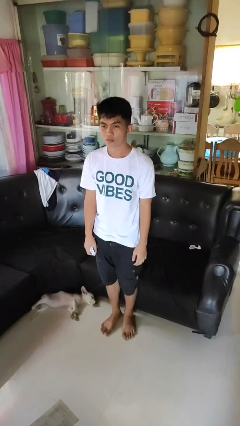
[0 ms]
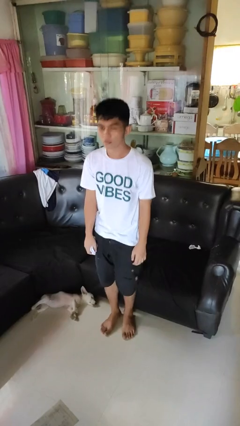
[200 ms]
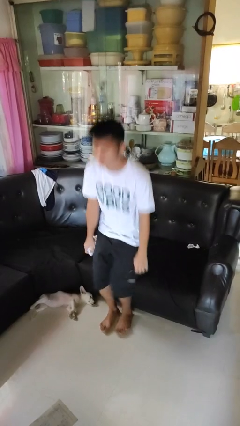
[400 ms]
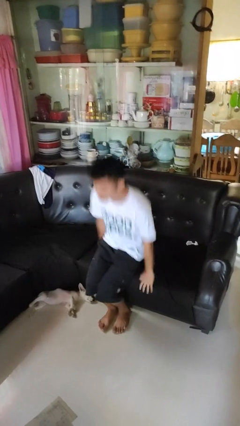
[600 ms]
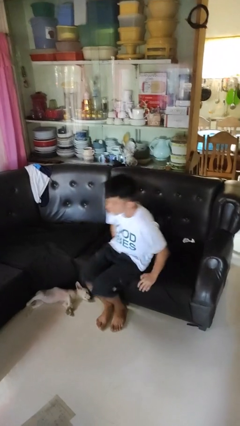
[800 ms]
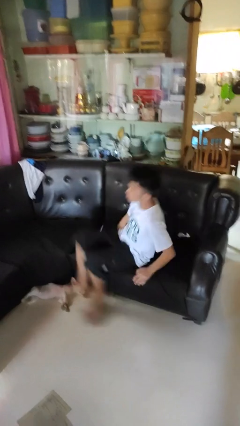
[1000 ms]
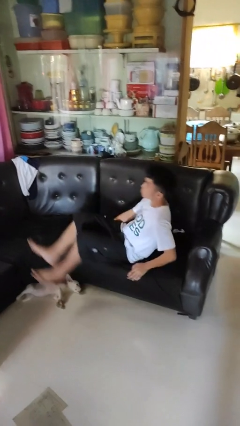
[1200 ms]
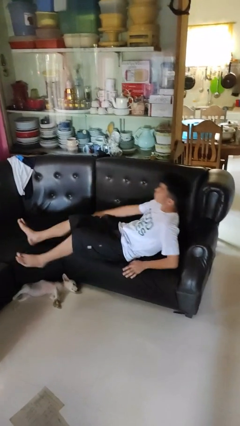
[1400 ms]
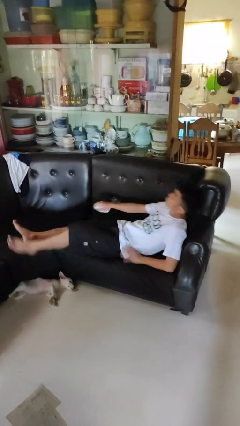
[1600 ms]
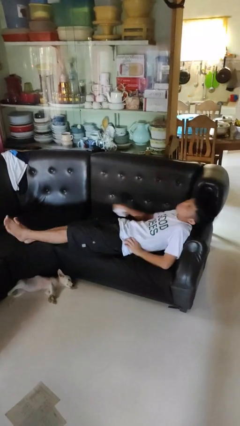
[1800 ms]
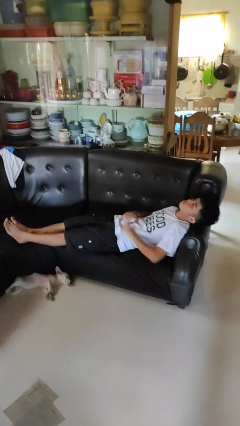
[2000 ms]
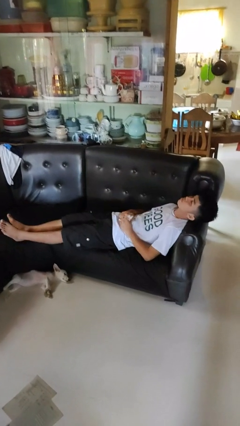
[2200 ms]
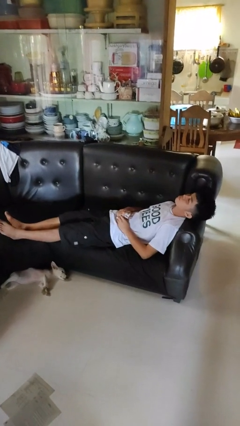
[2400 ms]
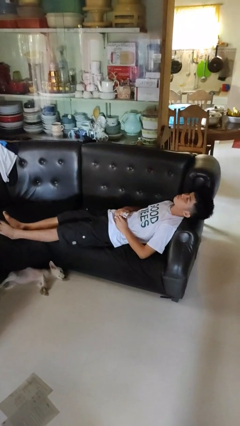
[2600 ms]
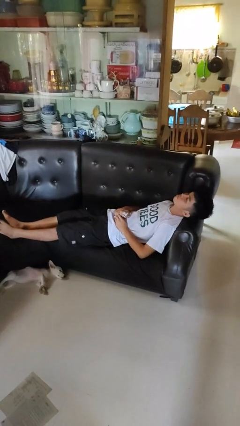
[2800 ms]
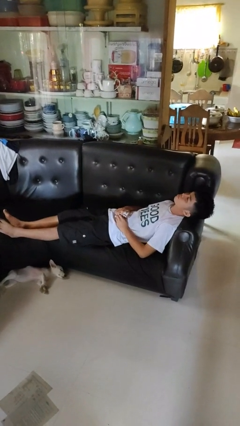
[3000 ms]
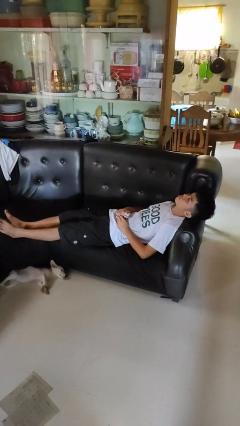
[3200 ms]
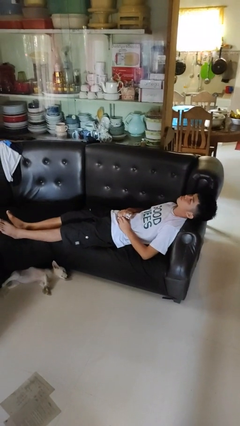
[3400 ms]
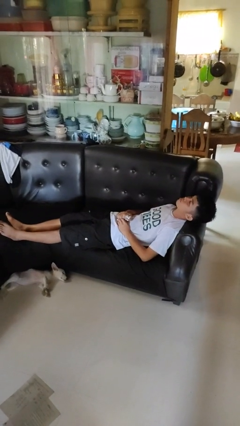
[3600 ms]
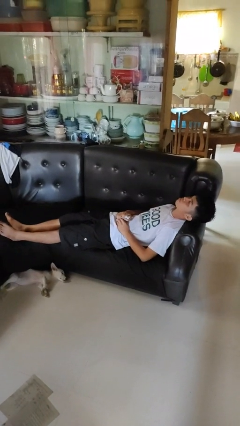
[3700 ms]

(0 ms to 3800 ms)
person lies down on couch

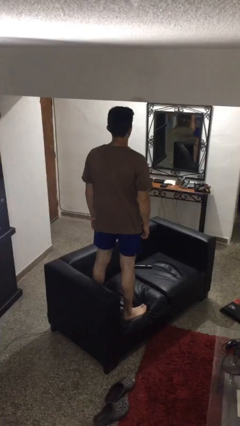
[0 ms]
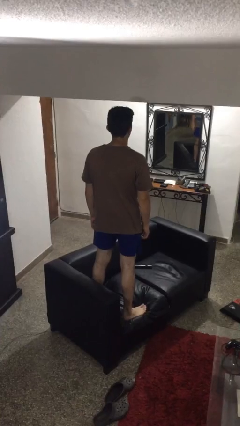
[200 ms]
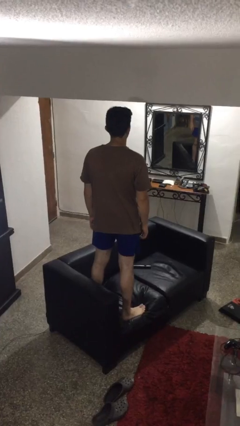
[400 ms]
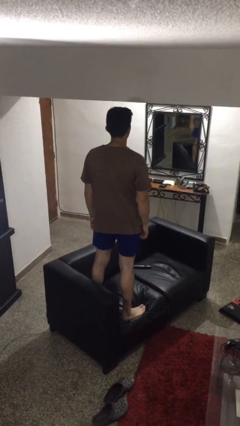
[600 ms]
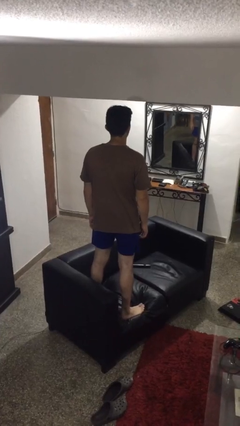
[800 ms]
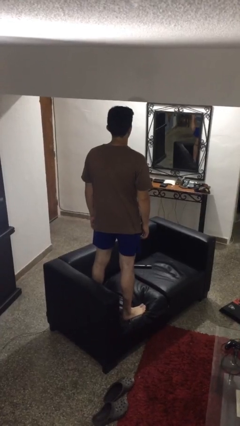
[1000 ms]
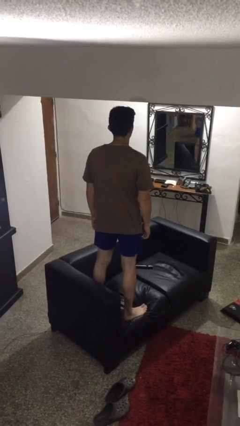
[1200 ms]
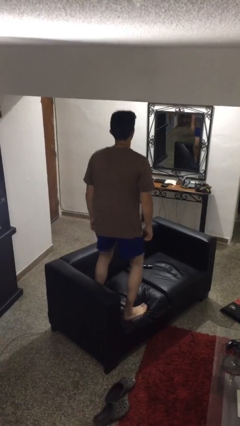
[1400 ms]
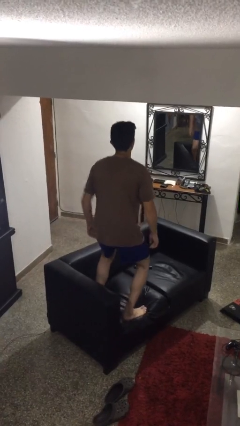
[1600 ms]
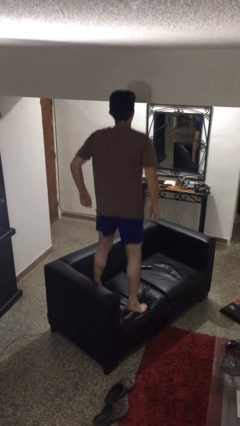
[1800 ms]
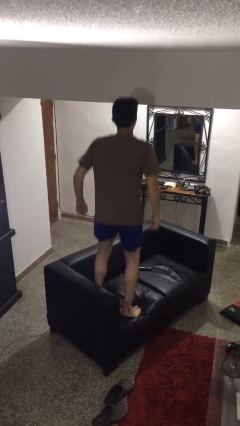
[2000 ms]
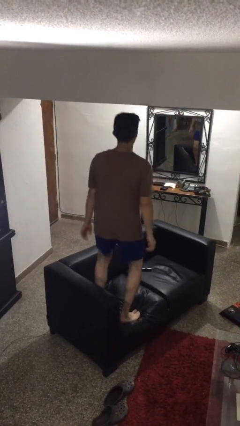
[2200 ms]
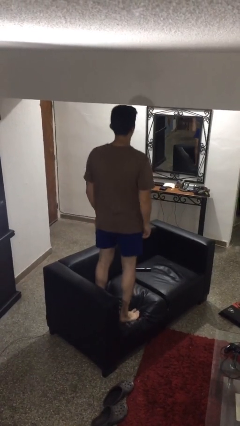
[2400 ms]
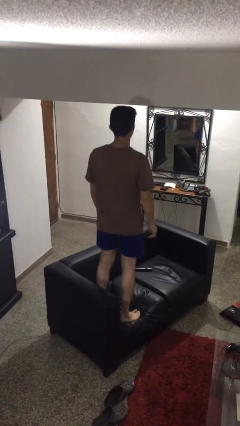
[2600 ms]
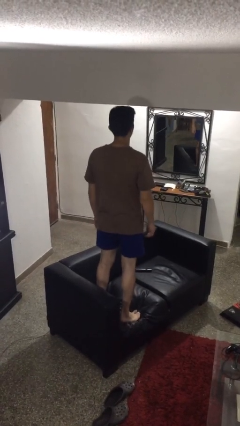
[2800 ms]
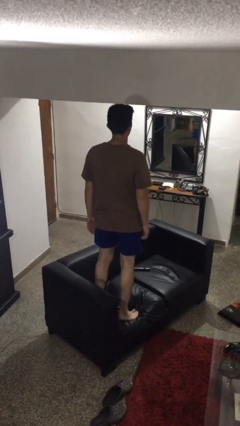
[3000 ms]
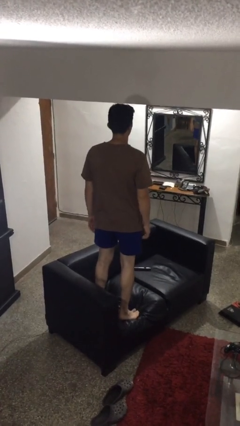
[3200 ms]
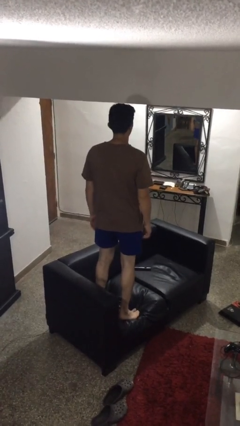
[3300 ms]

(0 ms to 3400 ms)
person jumps on couch

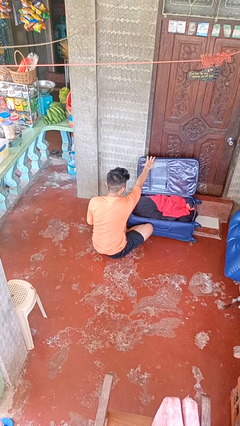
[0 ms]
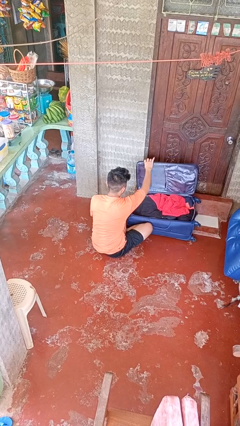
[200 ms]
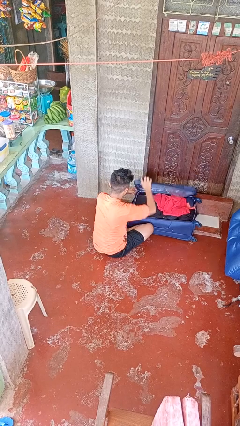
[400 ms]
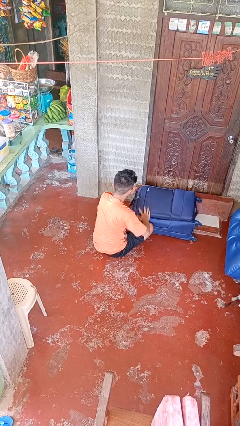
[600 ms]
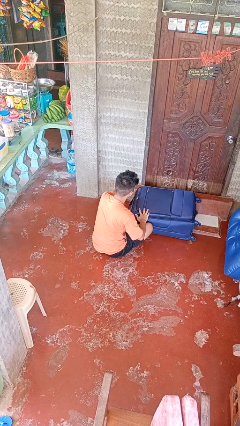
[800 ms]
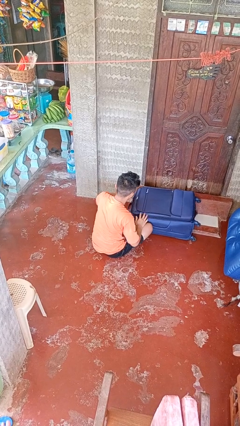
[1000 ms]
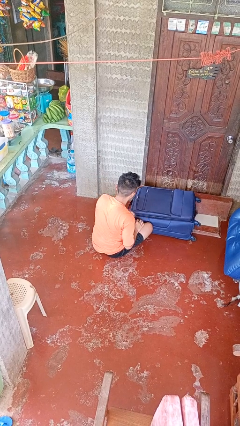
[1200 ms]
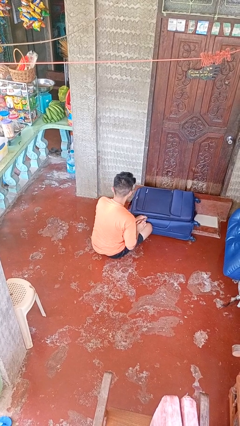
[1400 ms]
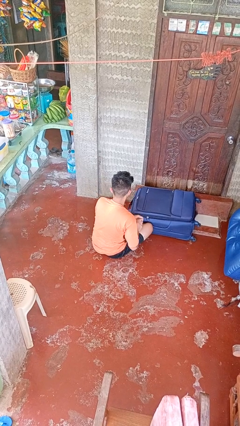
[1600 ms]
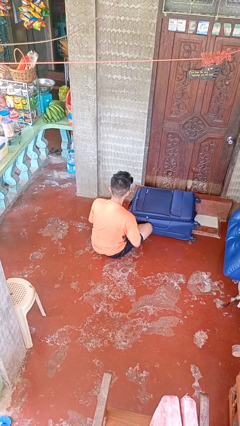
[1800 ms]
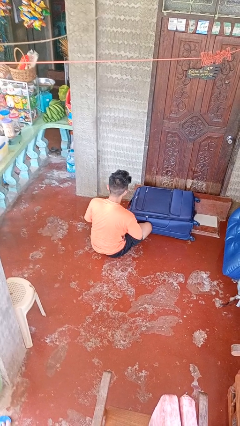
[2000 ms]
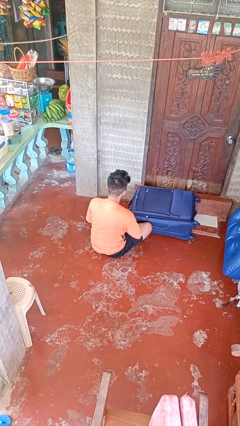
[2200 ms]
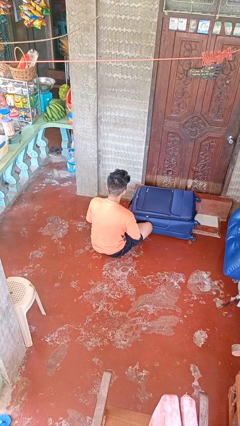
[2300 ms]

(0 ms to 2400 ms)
person closes suitcase

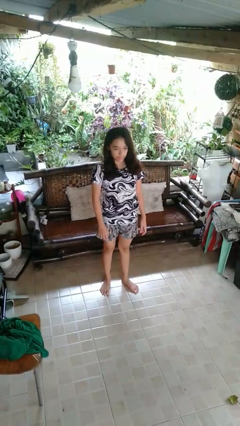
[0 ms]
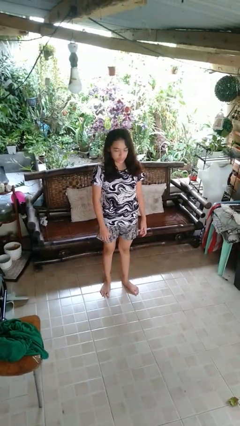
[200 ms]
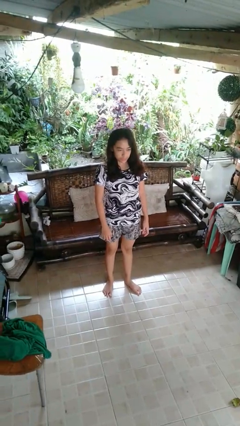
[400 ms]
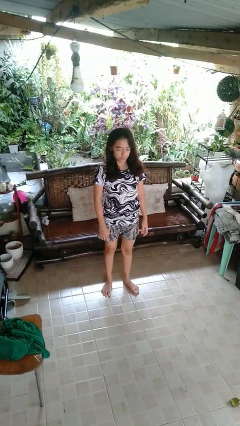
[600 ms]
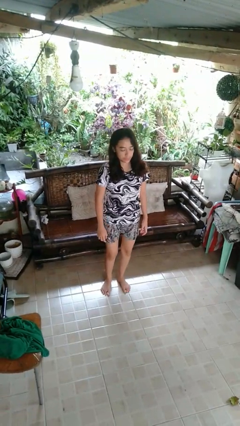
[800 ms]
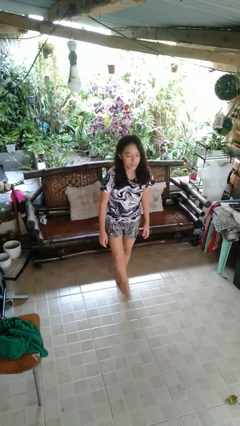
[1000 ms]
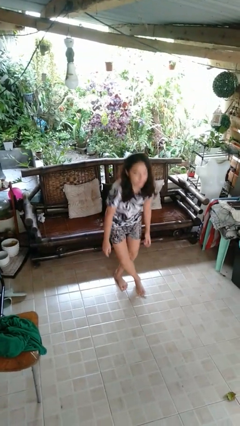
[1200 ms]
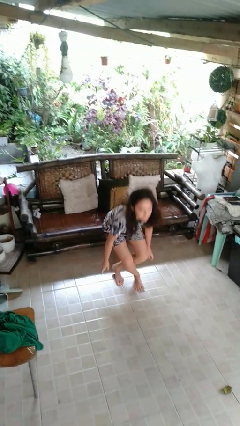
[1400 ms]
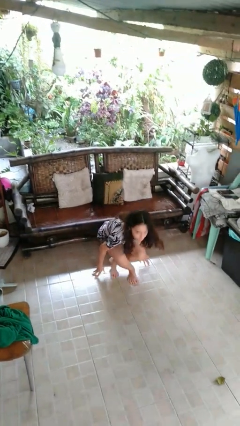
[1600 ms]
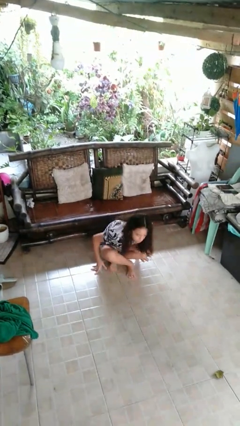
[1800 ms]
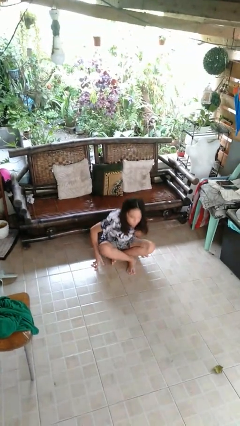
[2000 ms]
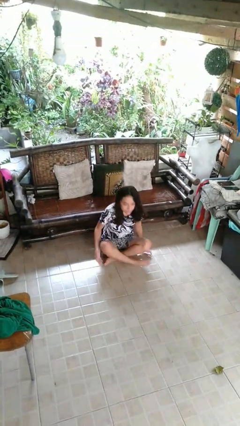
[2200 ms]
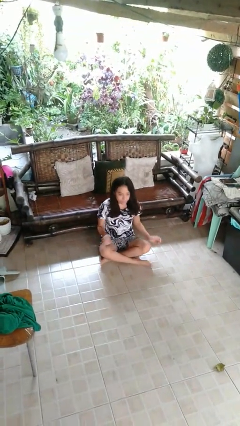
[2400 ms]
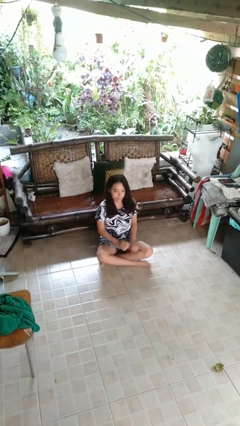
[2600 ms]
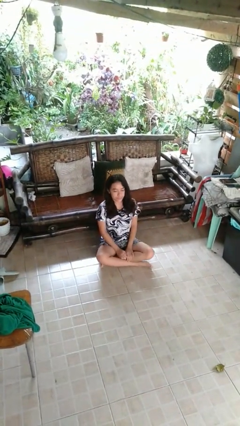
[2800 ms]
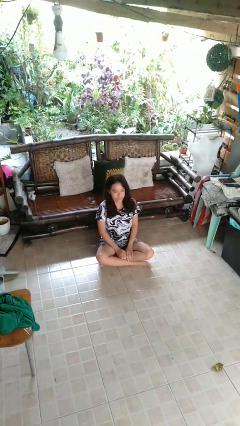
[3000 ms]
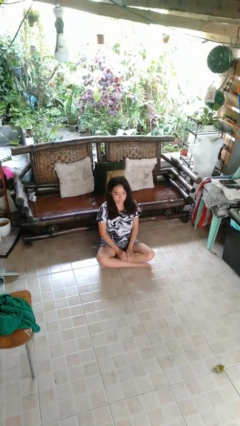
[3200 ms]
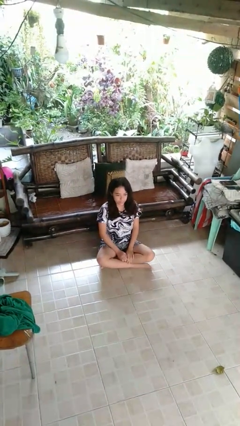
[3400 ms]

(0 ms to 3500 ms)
person sits crisscross

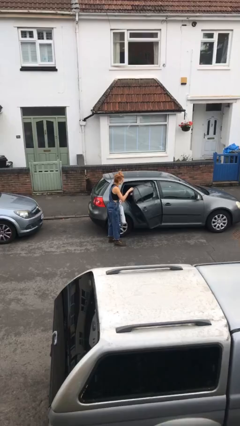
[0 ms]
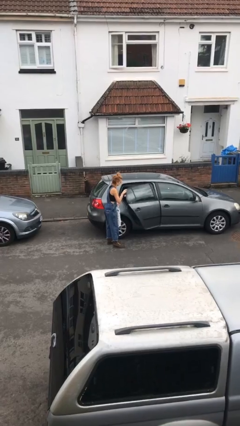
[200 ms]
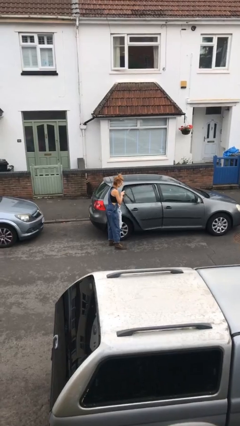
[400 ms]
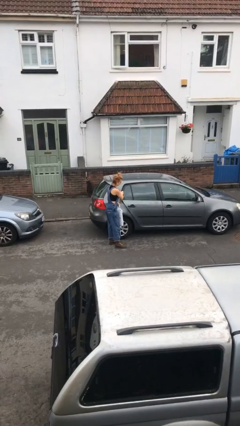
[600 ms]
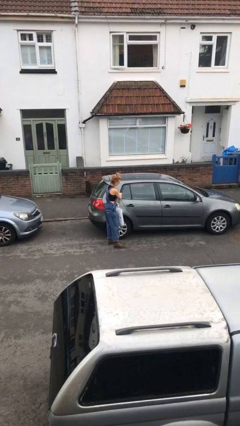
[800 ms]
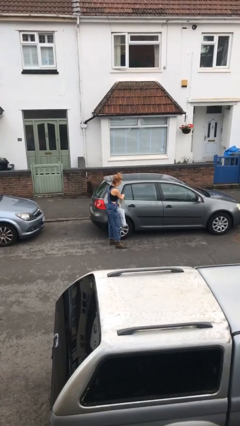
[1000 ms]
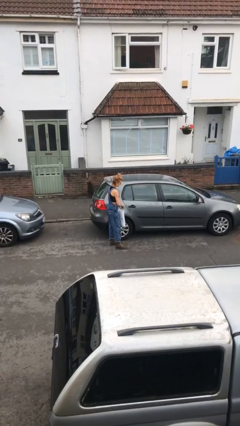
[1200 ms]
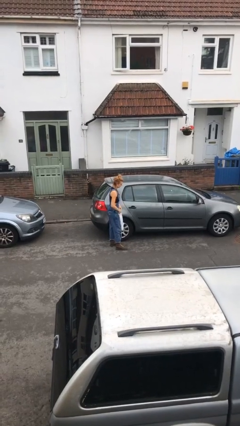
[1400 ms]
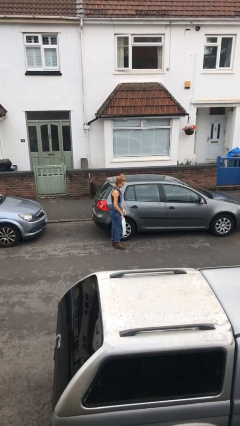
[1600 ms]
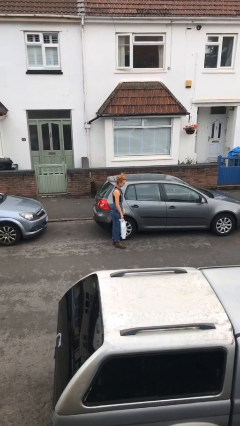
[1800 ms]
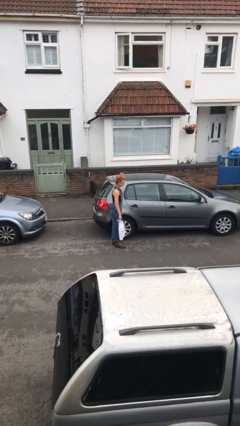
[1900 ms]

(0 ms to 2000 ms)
person closes car door

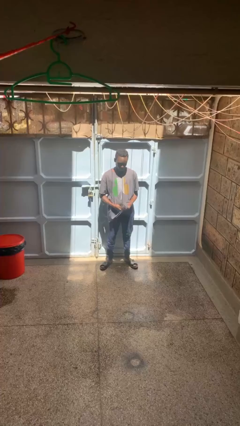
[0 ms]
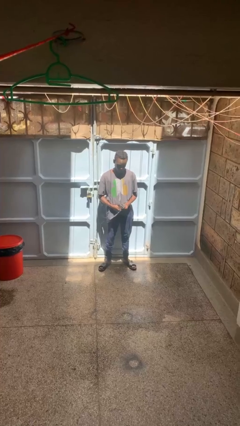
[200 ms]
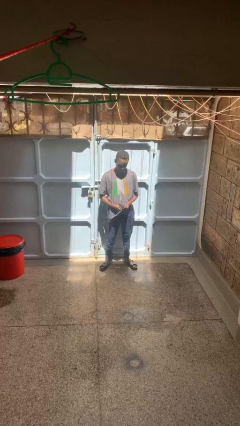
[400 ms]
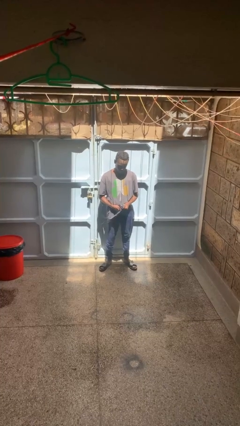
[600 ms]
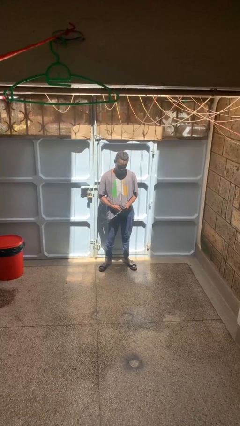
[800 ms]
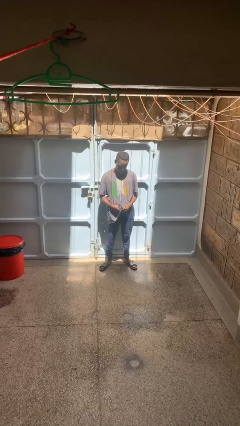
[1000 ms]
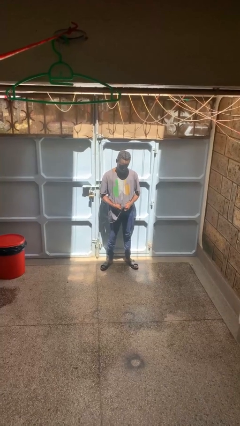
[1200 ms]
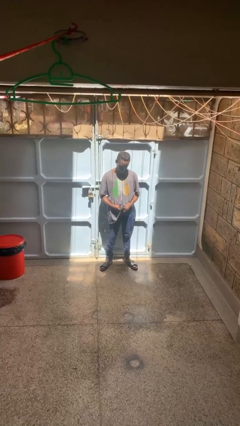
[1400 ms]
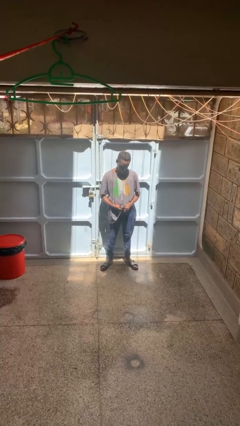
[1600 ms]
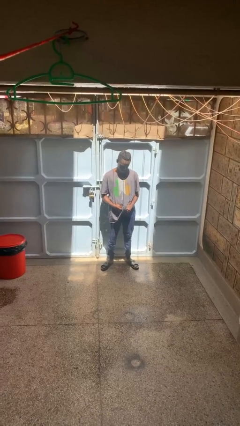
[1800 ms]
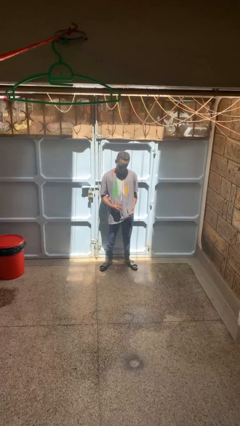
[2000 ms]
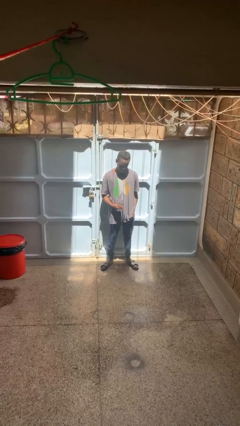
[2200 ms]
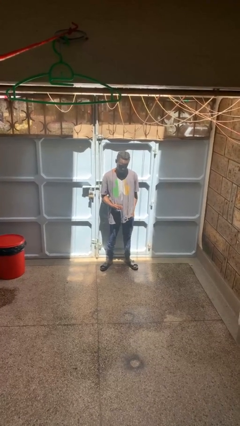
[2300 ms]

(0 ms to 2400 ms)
person cleans eyeglasses
